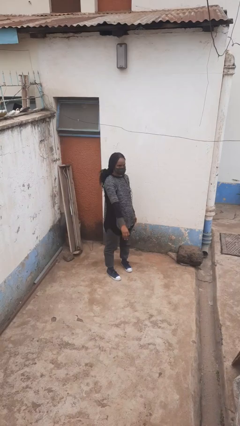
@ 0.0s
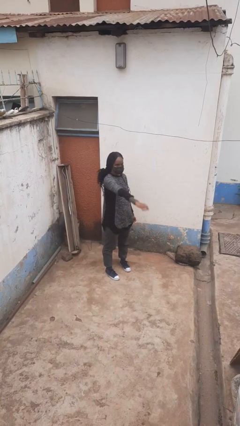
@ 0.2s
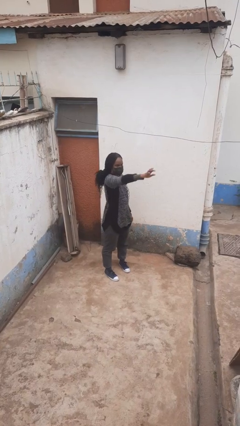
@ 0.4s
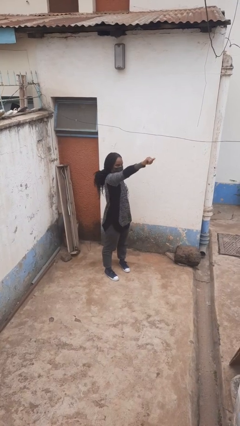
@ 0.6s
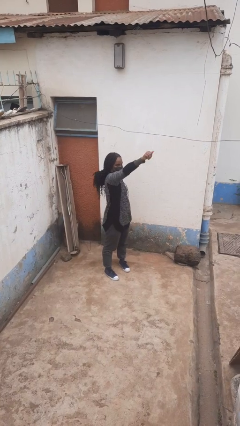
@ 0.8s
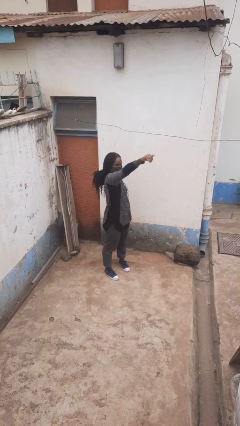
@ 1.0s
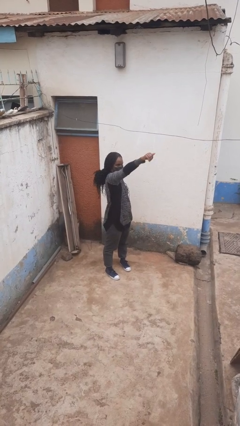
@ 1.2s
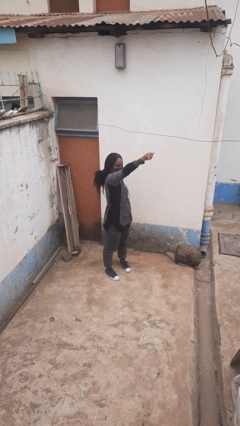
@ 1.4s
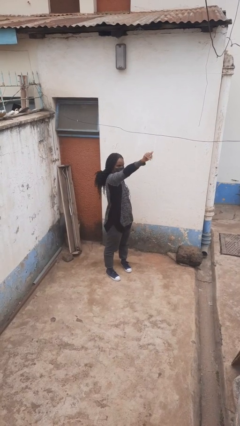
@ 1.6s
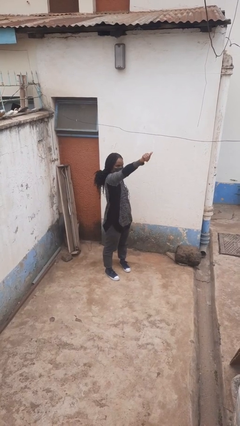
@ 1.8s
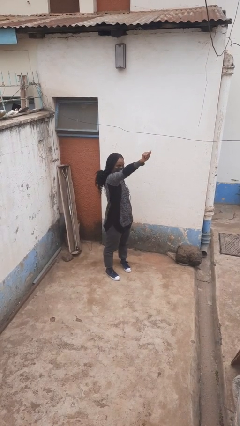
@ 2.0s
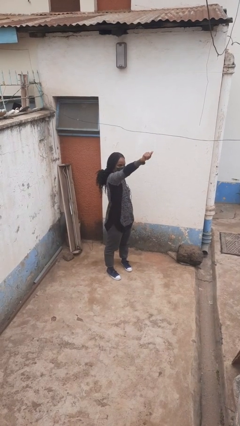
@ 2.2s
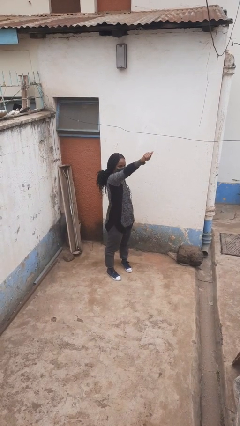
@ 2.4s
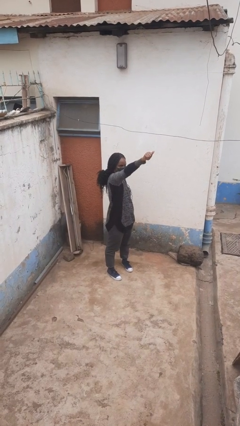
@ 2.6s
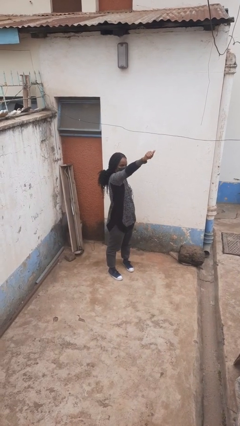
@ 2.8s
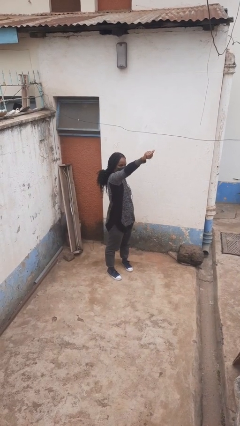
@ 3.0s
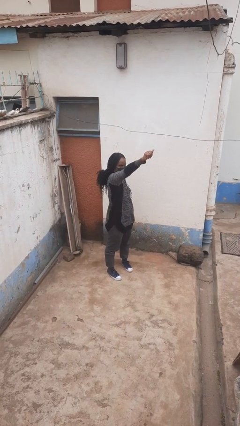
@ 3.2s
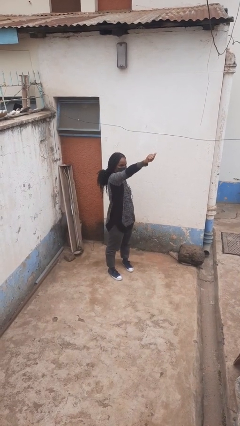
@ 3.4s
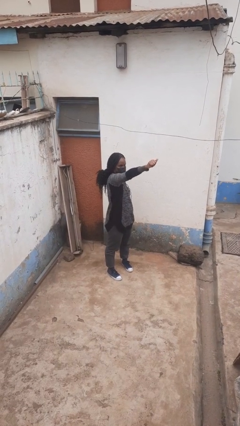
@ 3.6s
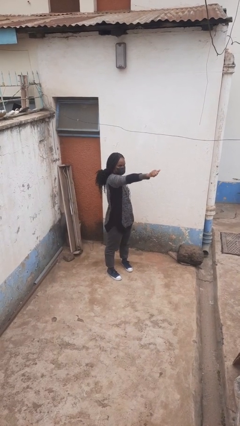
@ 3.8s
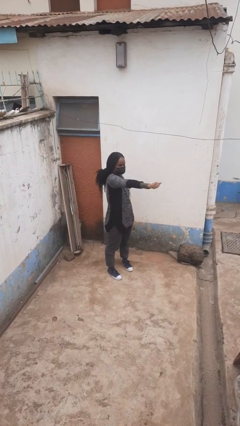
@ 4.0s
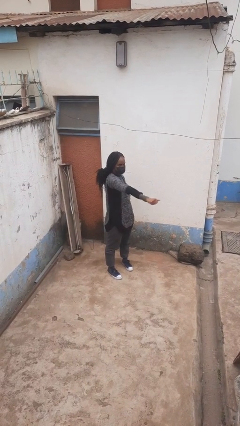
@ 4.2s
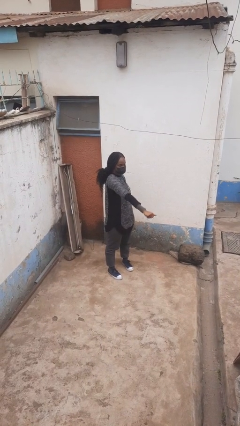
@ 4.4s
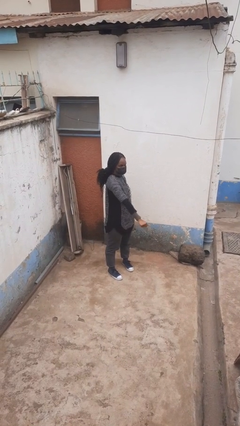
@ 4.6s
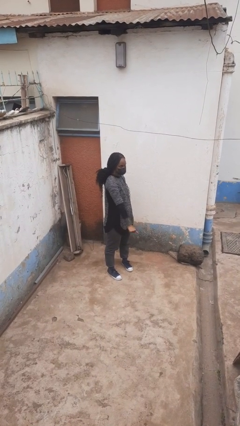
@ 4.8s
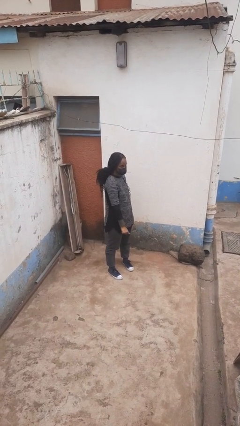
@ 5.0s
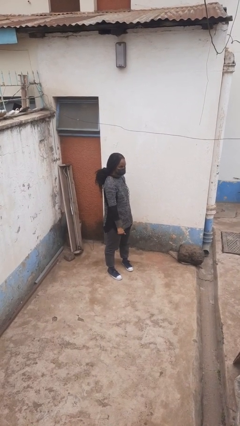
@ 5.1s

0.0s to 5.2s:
person gestures come here

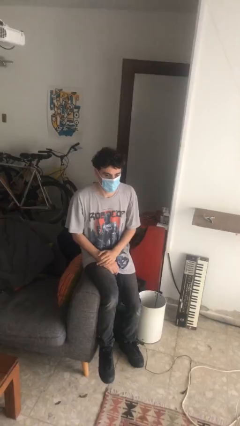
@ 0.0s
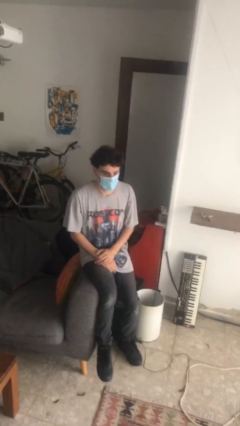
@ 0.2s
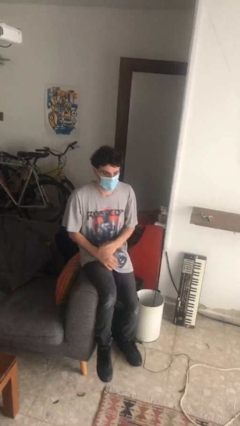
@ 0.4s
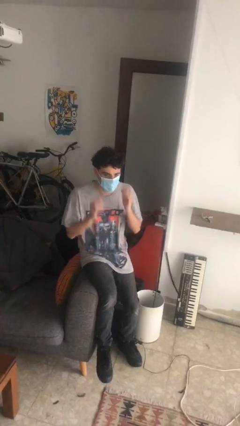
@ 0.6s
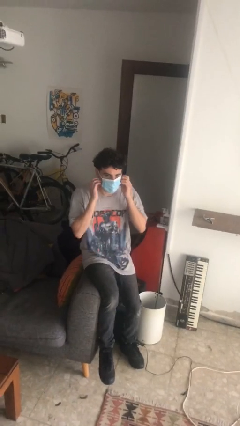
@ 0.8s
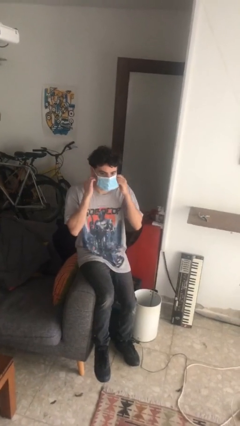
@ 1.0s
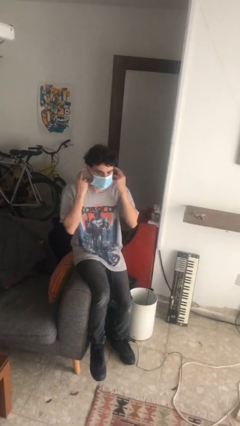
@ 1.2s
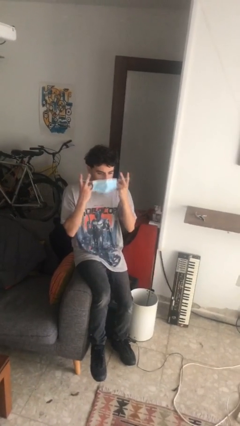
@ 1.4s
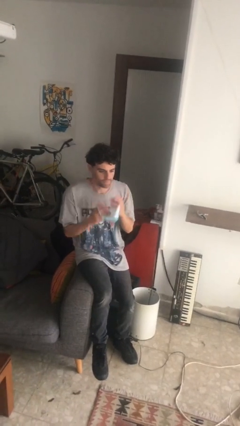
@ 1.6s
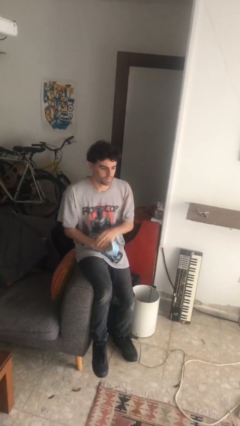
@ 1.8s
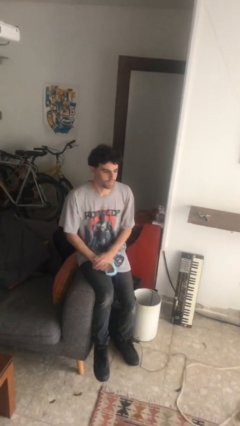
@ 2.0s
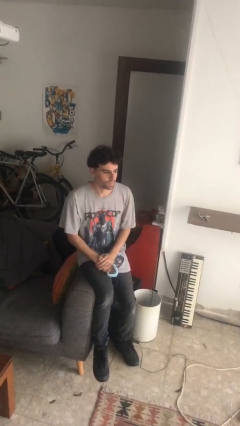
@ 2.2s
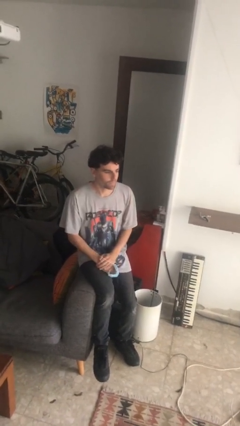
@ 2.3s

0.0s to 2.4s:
person takes off facemask

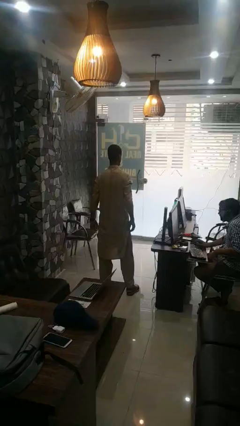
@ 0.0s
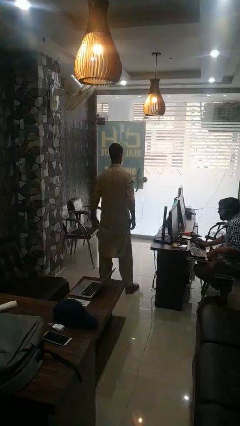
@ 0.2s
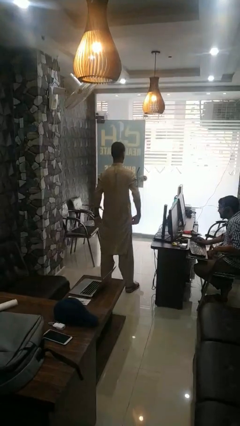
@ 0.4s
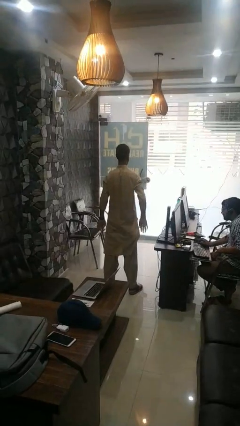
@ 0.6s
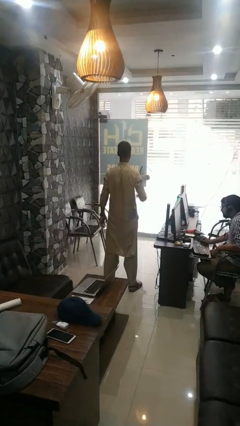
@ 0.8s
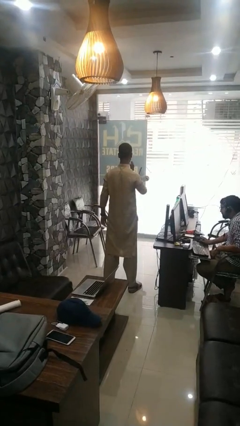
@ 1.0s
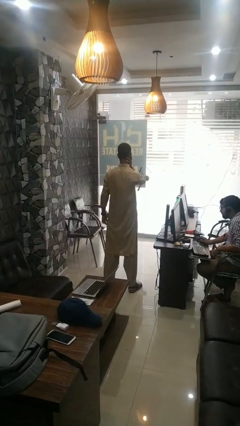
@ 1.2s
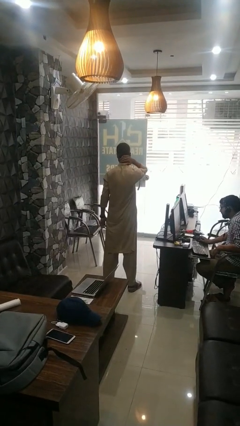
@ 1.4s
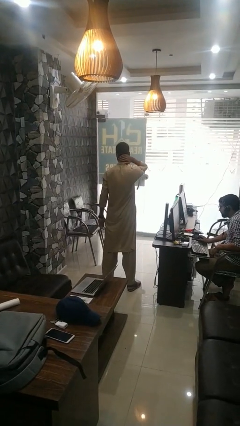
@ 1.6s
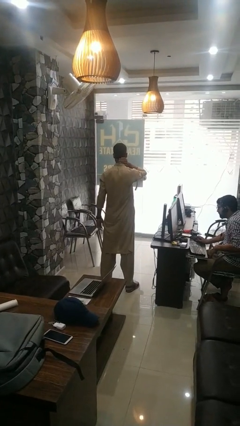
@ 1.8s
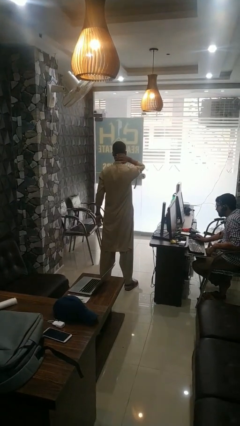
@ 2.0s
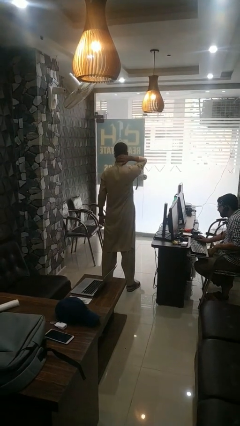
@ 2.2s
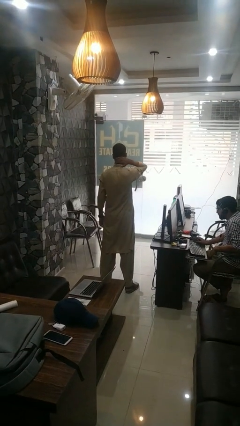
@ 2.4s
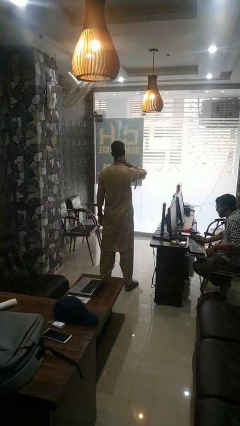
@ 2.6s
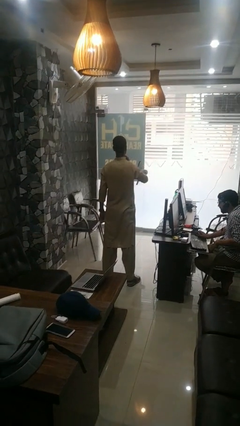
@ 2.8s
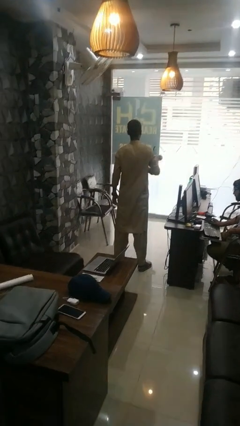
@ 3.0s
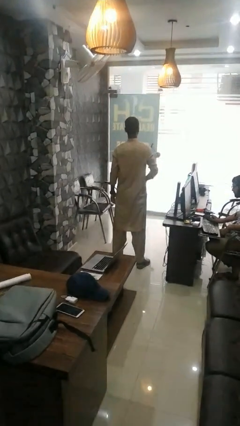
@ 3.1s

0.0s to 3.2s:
person rubs neck

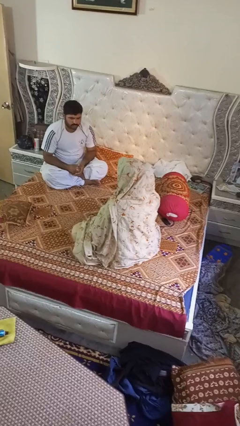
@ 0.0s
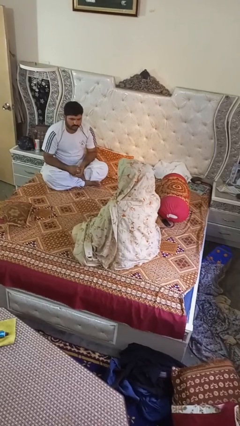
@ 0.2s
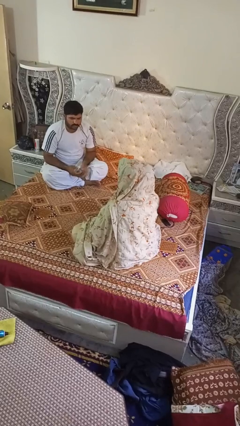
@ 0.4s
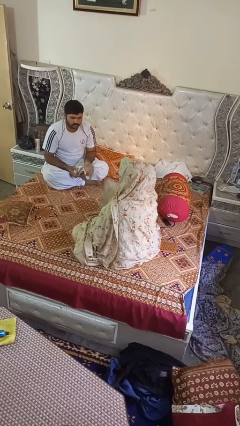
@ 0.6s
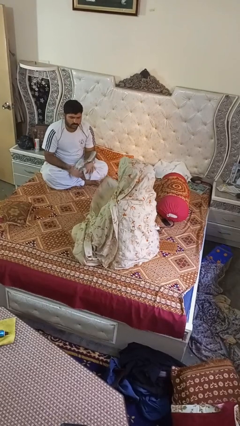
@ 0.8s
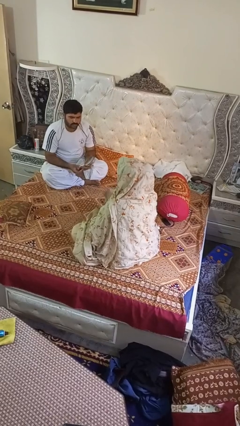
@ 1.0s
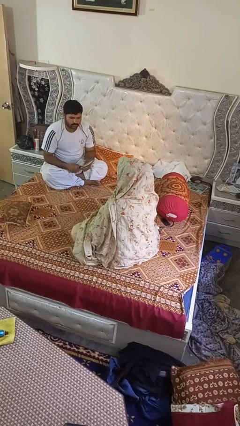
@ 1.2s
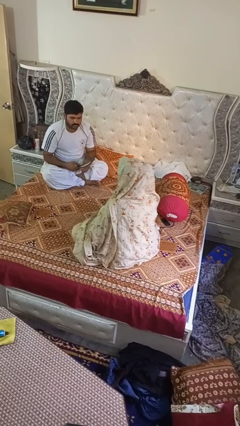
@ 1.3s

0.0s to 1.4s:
person throws object to person

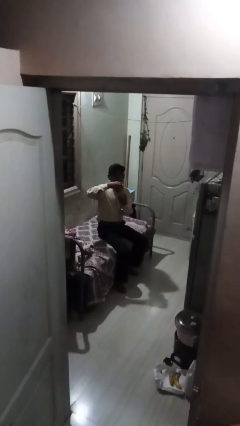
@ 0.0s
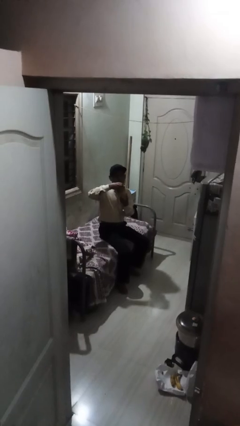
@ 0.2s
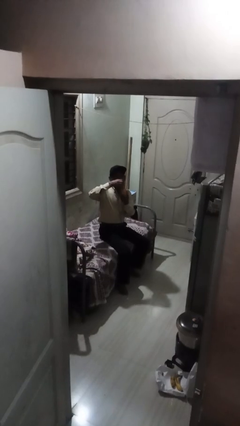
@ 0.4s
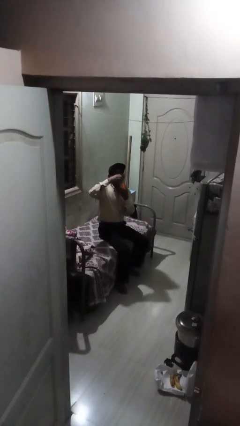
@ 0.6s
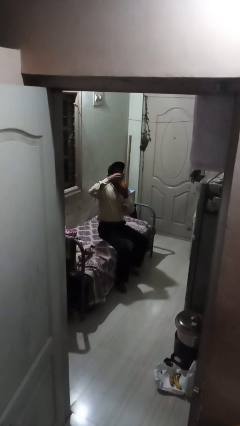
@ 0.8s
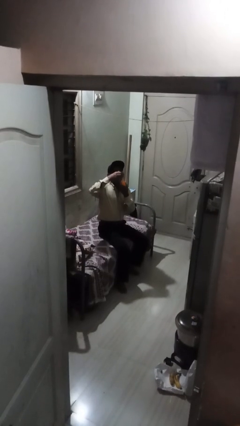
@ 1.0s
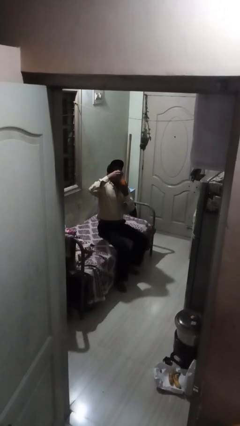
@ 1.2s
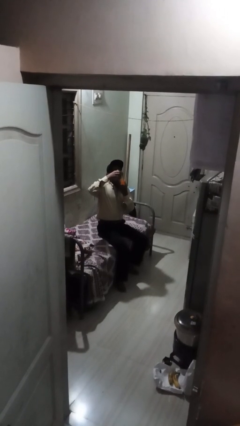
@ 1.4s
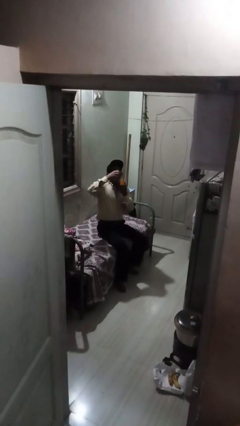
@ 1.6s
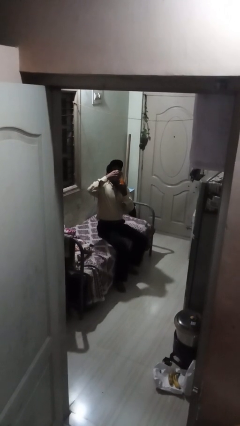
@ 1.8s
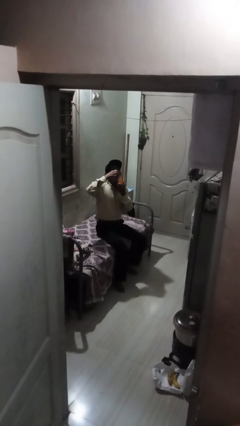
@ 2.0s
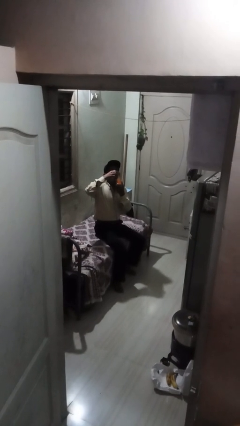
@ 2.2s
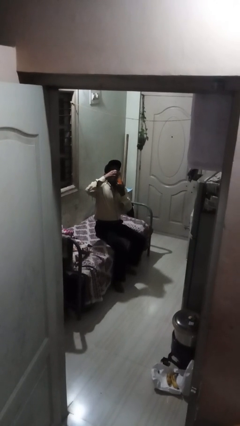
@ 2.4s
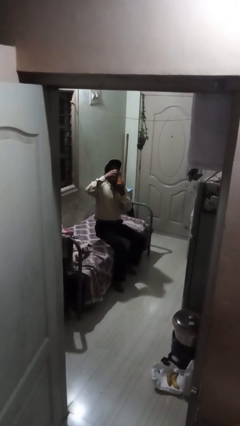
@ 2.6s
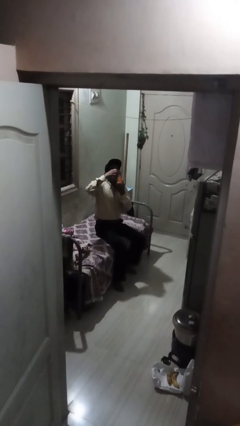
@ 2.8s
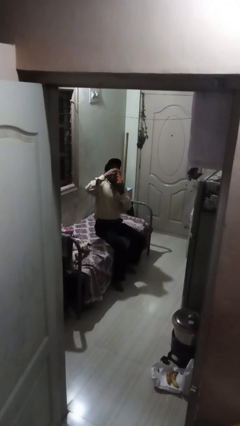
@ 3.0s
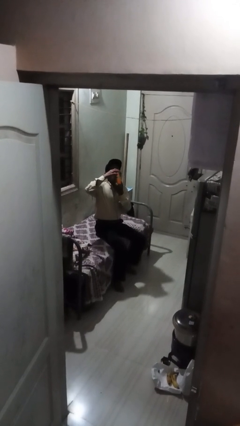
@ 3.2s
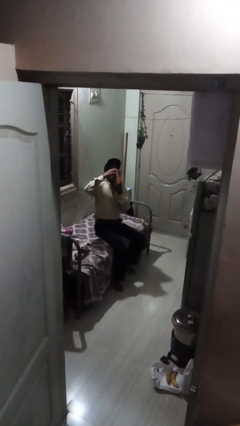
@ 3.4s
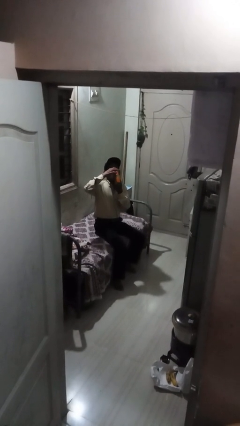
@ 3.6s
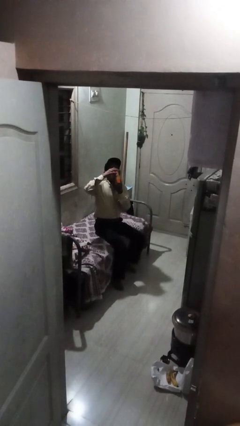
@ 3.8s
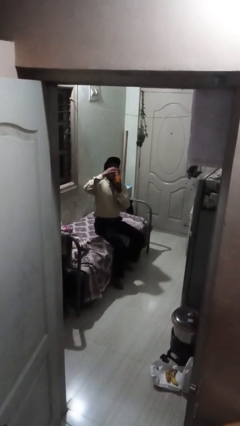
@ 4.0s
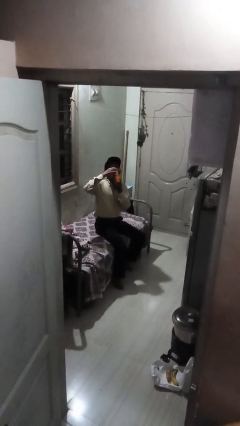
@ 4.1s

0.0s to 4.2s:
person drinks from beverage can

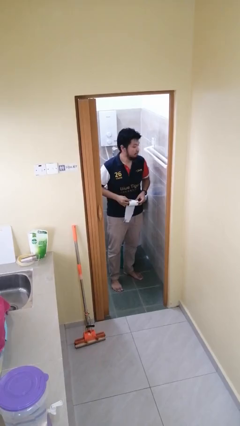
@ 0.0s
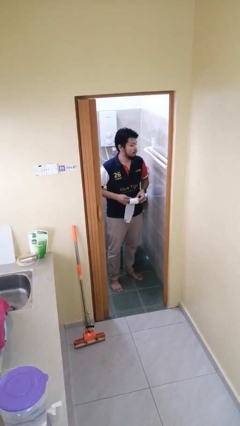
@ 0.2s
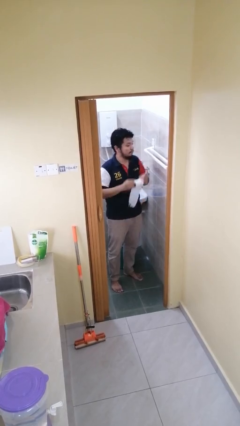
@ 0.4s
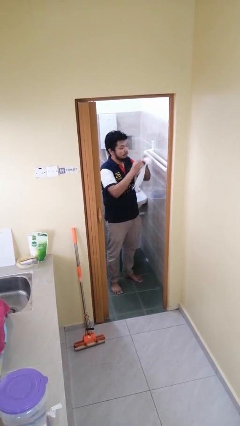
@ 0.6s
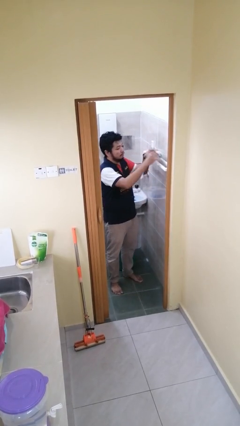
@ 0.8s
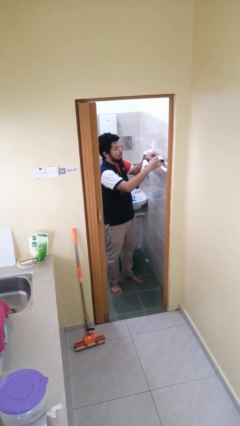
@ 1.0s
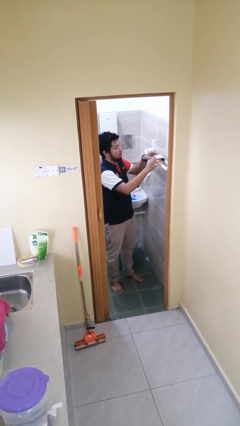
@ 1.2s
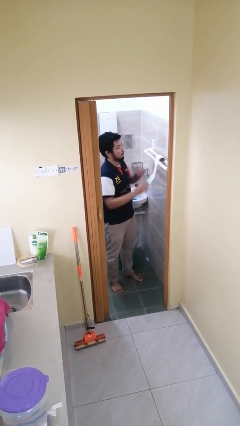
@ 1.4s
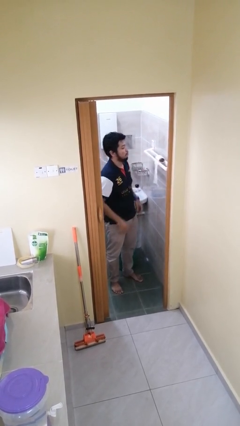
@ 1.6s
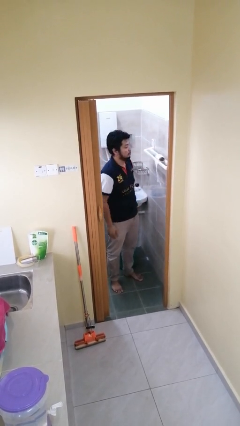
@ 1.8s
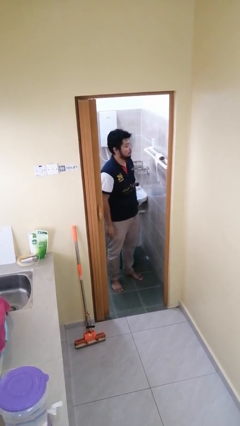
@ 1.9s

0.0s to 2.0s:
person puts down object on countertop
